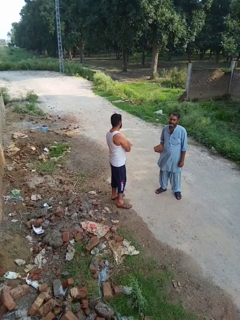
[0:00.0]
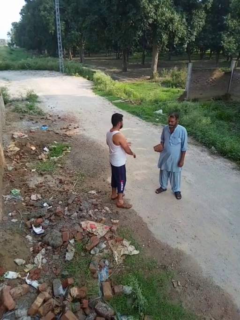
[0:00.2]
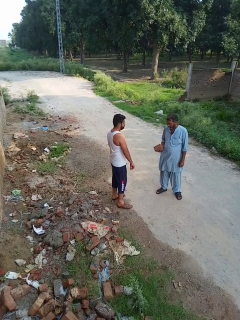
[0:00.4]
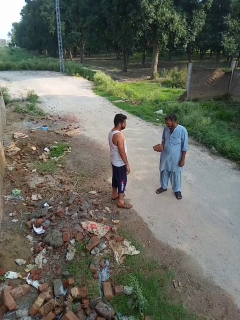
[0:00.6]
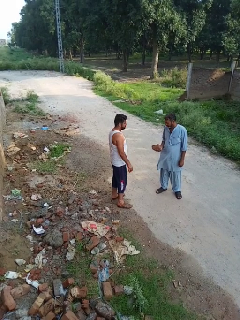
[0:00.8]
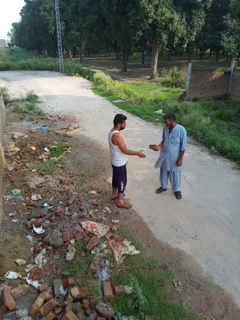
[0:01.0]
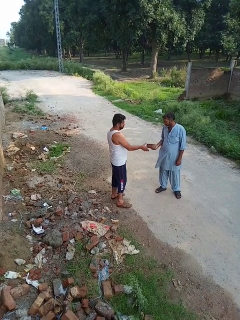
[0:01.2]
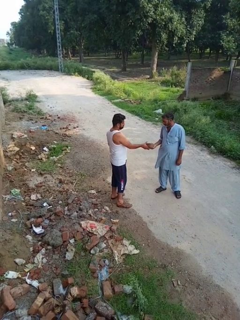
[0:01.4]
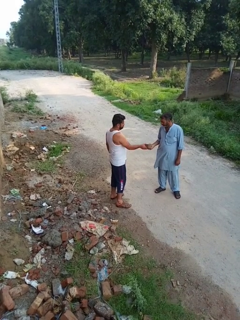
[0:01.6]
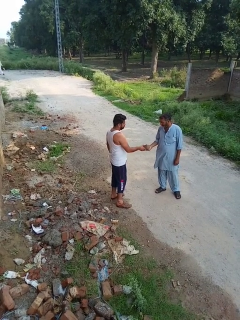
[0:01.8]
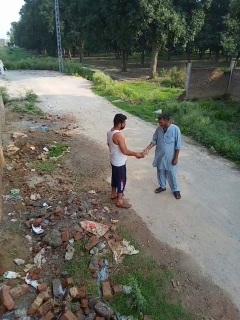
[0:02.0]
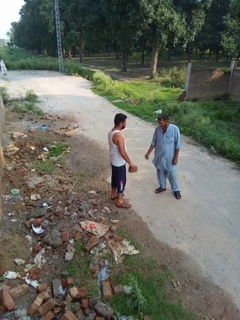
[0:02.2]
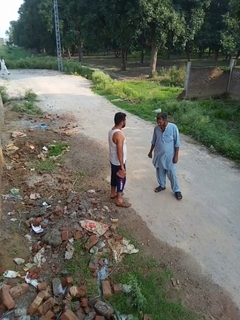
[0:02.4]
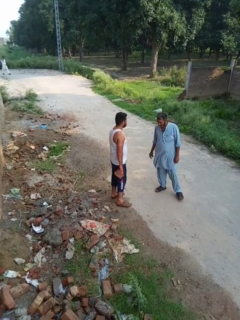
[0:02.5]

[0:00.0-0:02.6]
person transfers object to person

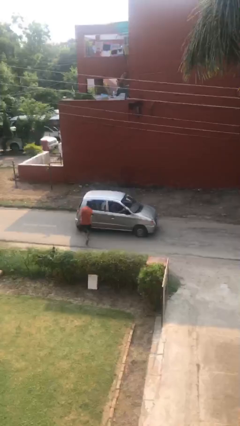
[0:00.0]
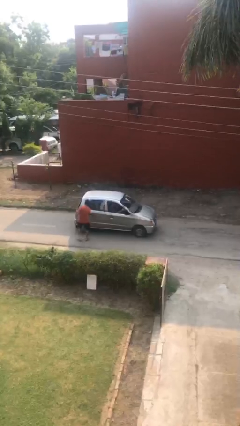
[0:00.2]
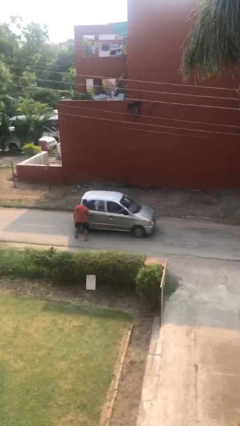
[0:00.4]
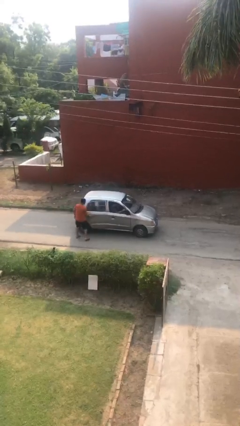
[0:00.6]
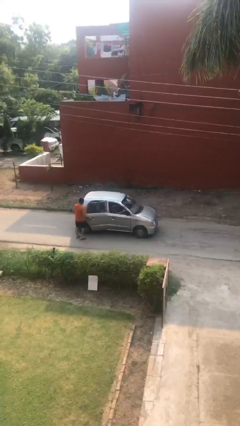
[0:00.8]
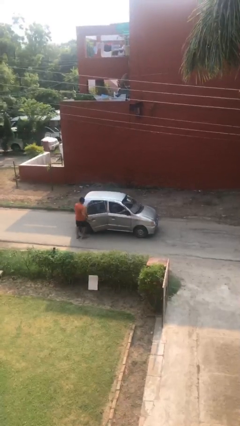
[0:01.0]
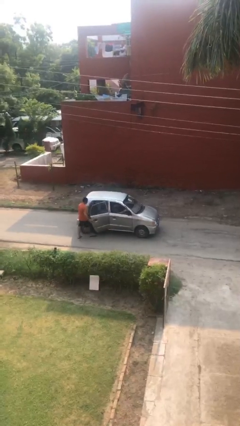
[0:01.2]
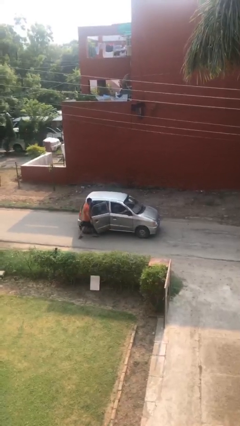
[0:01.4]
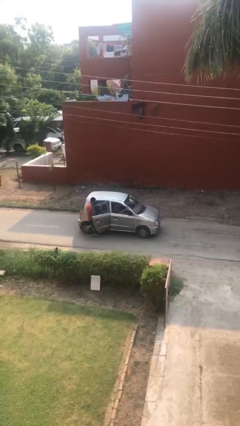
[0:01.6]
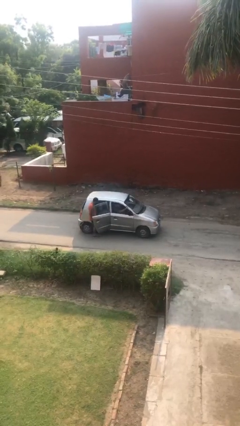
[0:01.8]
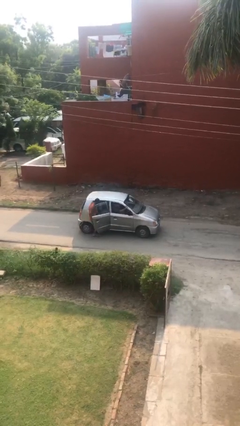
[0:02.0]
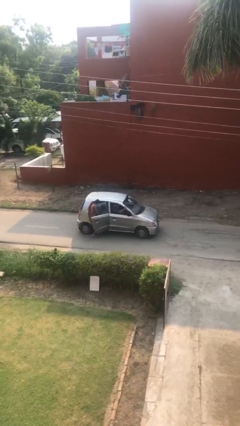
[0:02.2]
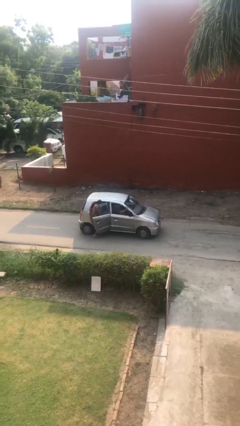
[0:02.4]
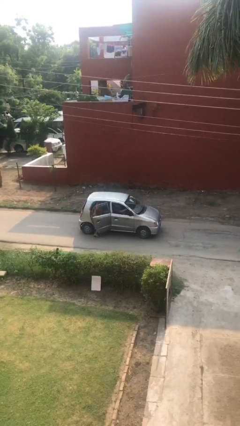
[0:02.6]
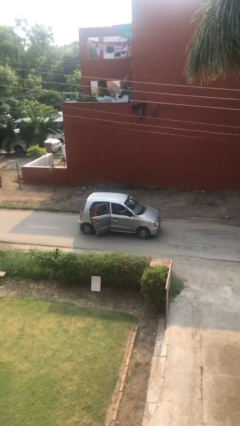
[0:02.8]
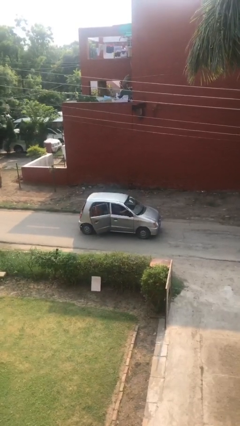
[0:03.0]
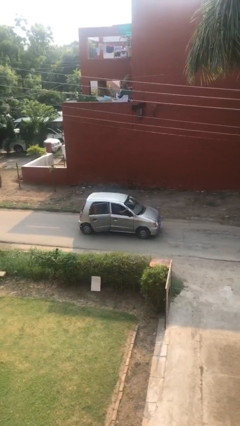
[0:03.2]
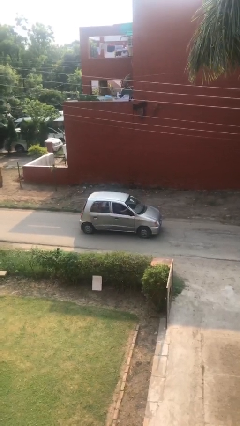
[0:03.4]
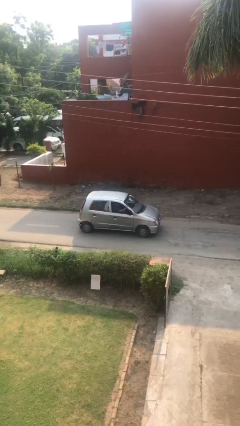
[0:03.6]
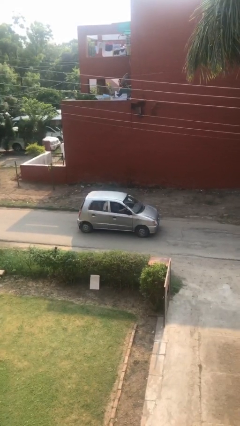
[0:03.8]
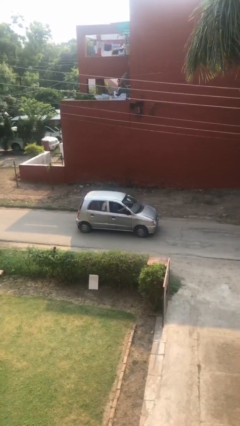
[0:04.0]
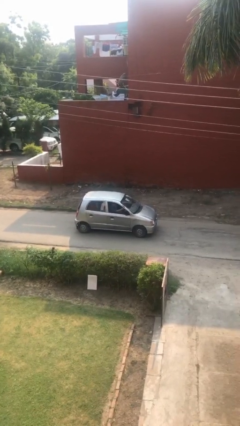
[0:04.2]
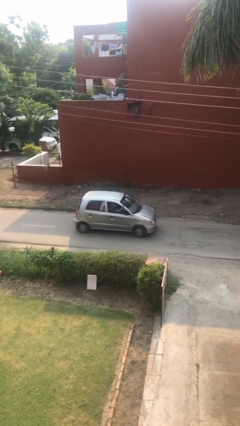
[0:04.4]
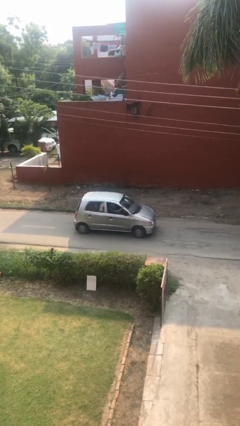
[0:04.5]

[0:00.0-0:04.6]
car picks up person

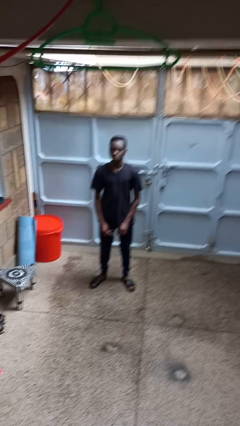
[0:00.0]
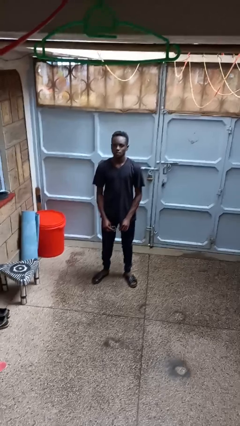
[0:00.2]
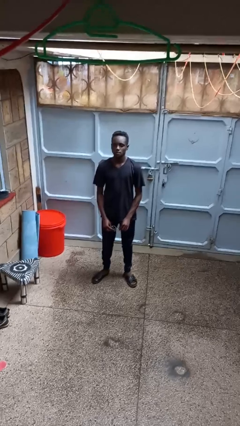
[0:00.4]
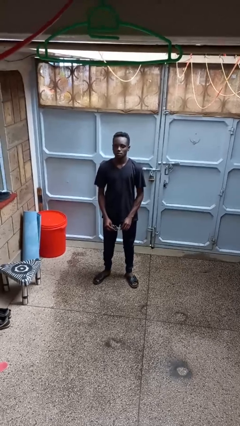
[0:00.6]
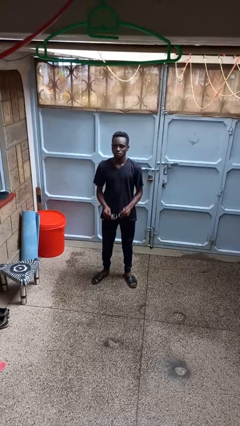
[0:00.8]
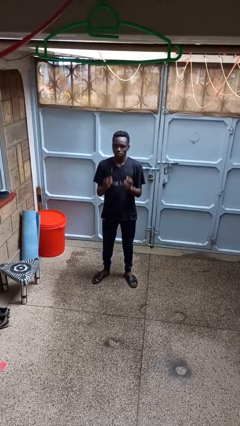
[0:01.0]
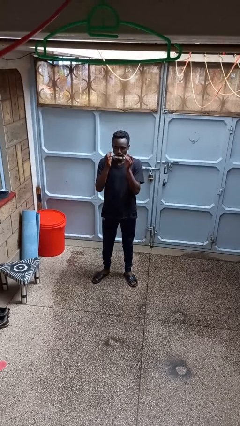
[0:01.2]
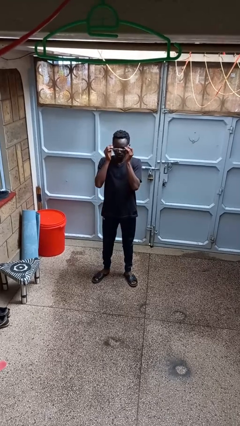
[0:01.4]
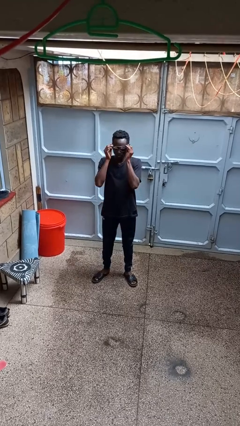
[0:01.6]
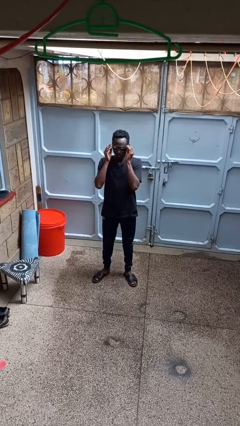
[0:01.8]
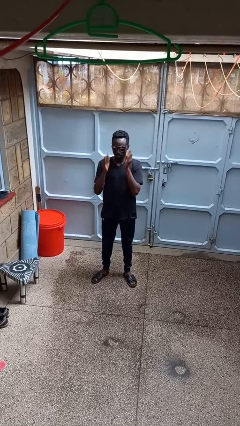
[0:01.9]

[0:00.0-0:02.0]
person puts on sunglasses

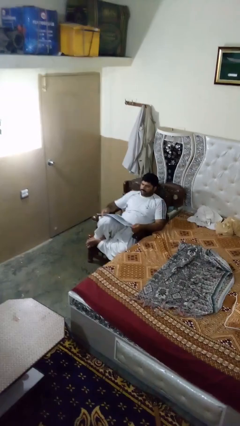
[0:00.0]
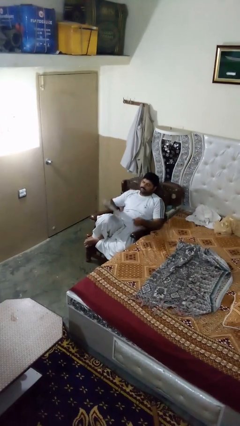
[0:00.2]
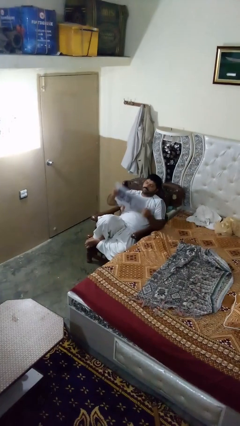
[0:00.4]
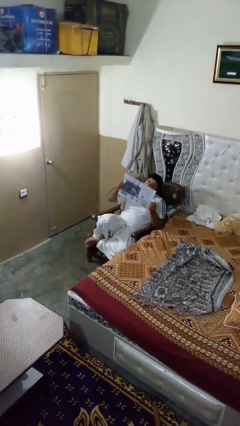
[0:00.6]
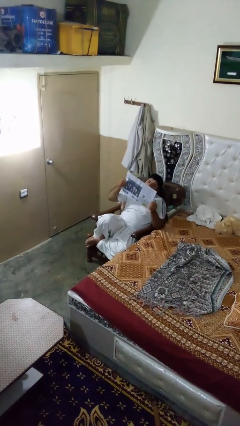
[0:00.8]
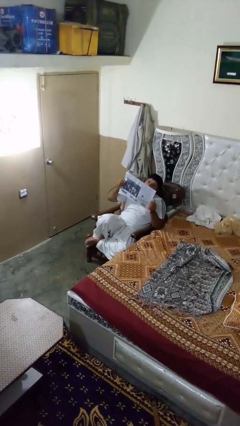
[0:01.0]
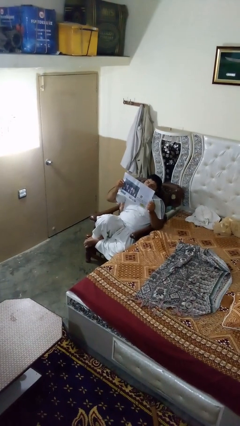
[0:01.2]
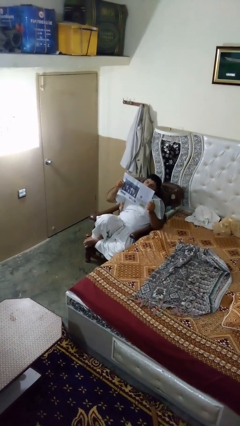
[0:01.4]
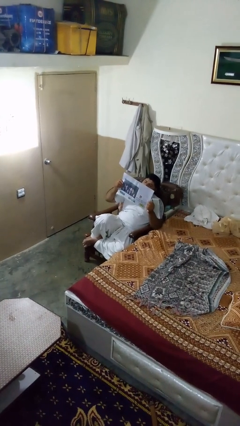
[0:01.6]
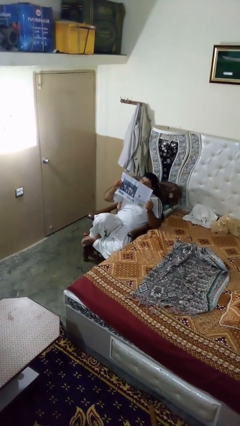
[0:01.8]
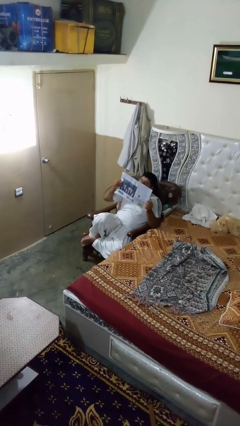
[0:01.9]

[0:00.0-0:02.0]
person reads newspaper

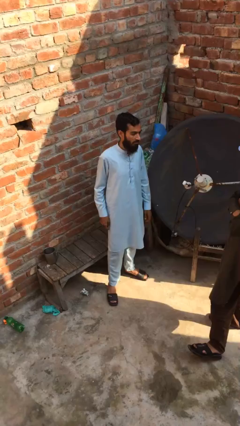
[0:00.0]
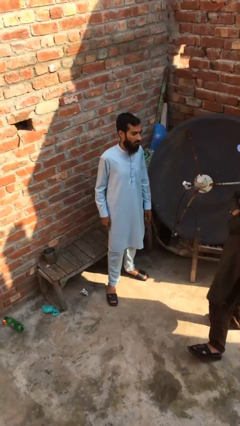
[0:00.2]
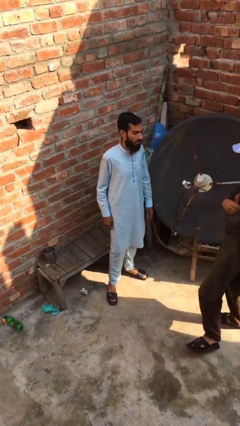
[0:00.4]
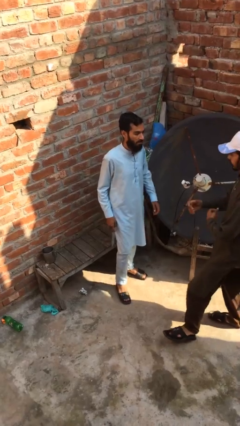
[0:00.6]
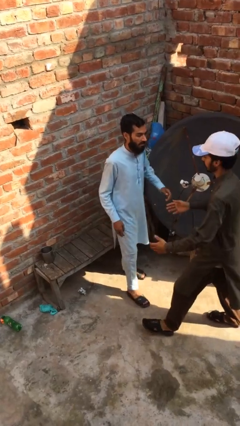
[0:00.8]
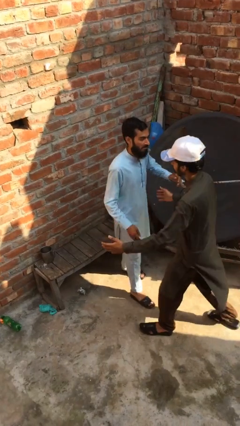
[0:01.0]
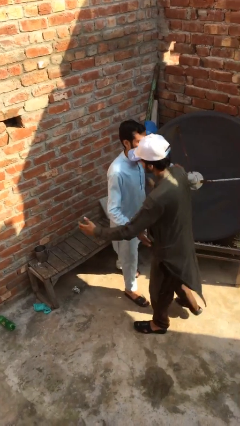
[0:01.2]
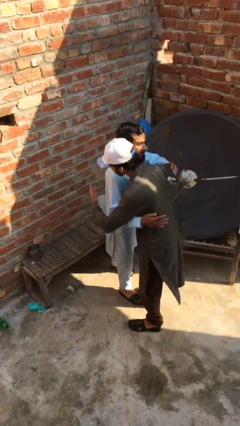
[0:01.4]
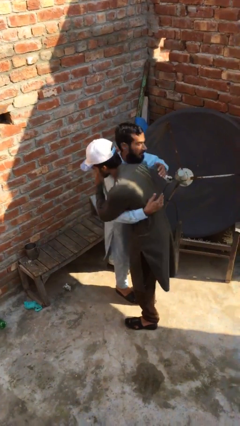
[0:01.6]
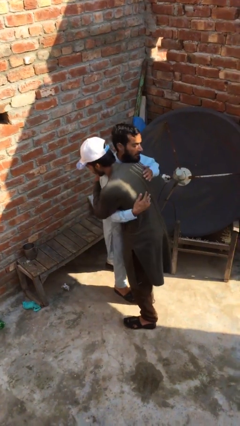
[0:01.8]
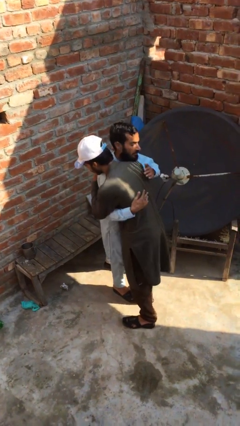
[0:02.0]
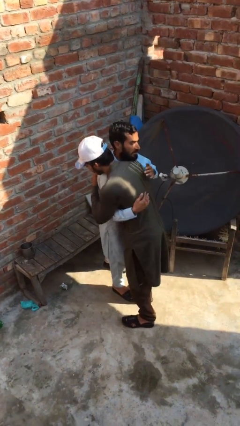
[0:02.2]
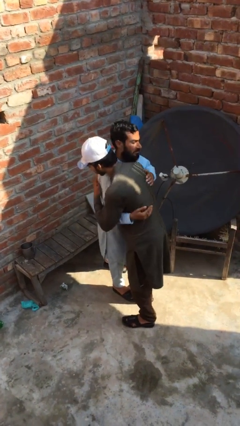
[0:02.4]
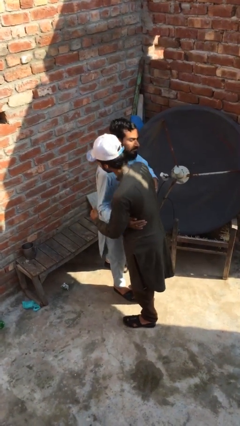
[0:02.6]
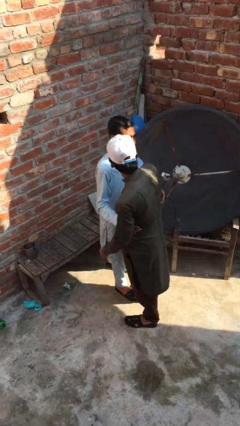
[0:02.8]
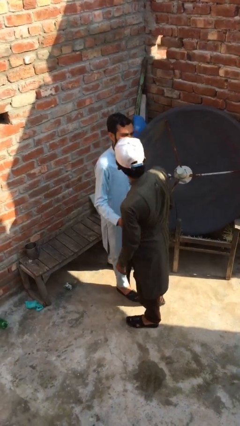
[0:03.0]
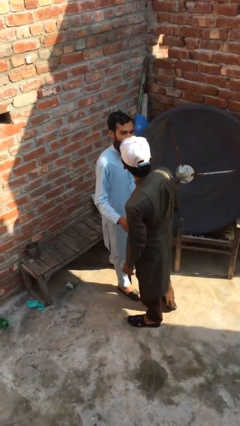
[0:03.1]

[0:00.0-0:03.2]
person embraces person

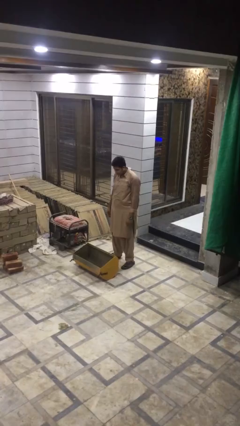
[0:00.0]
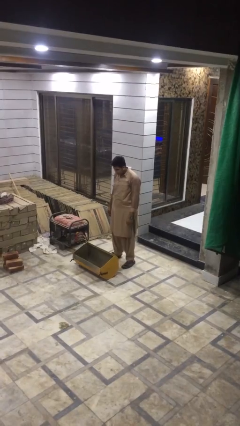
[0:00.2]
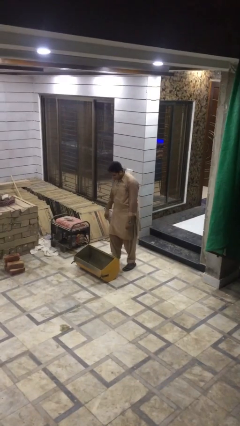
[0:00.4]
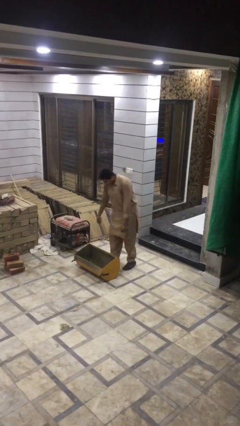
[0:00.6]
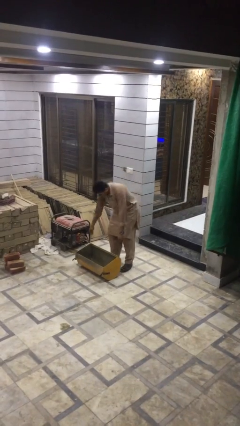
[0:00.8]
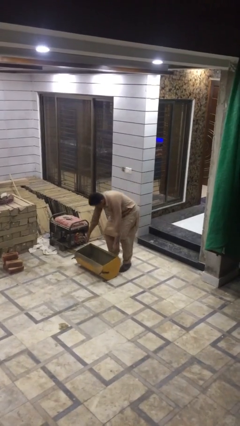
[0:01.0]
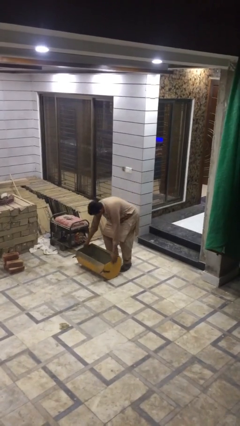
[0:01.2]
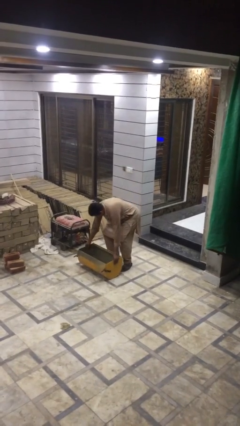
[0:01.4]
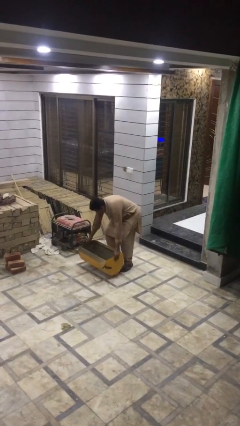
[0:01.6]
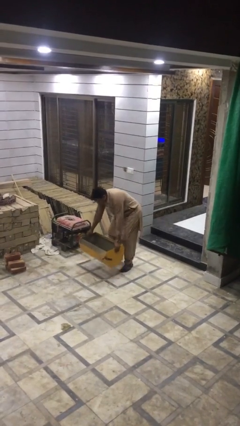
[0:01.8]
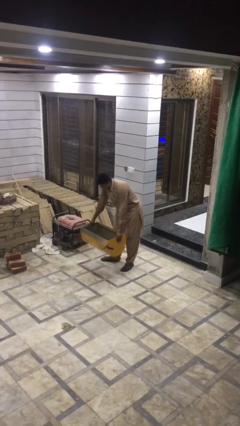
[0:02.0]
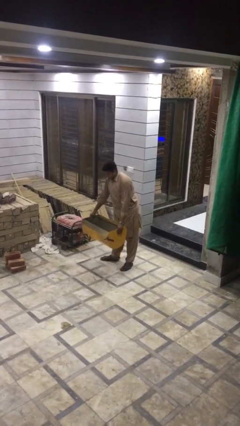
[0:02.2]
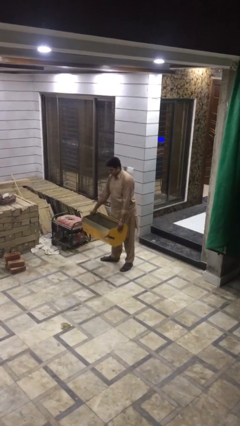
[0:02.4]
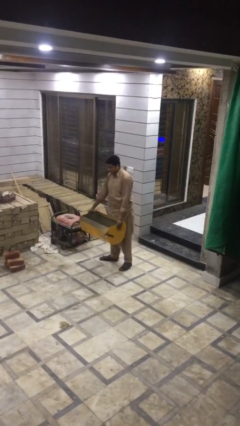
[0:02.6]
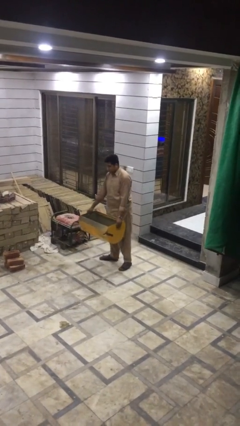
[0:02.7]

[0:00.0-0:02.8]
person picks up object from floor

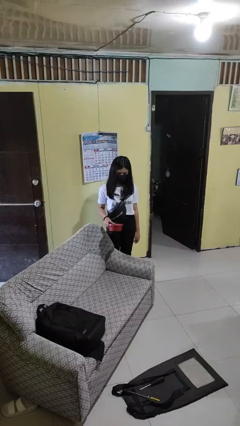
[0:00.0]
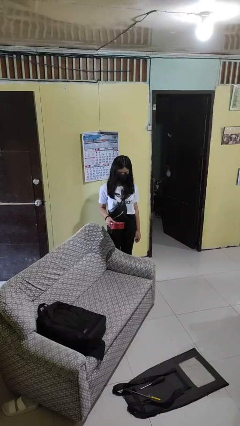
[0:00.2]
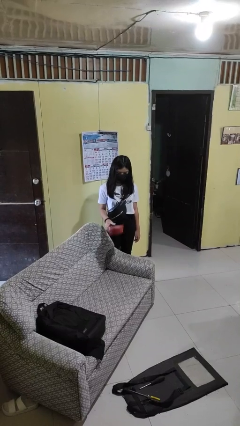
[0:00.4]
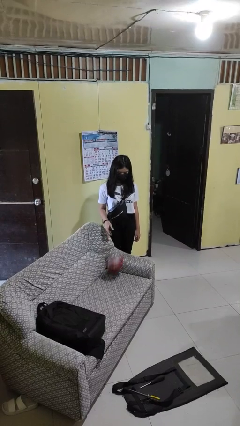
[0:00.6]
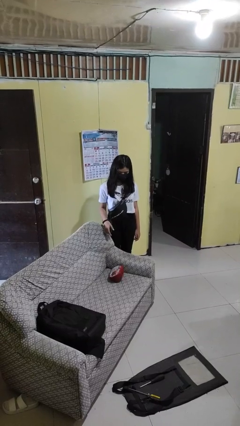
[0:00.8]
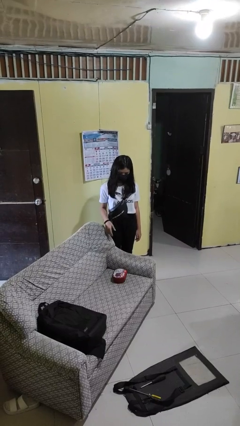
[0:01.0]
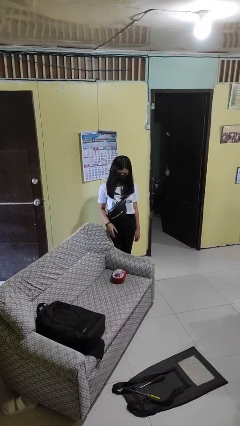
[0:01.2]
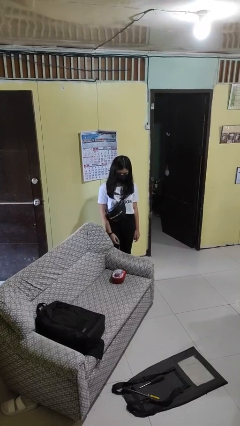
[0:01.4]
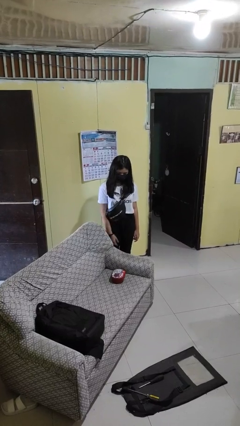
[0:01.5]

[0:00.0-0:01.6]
person puts down object on couch
